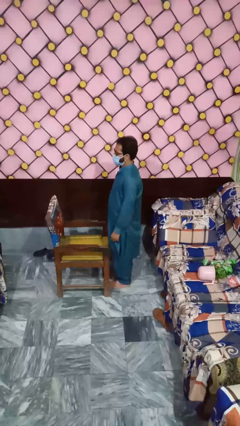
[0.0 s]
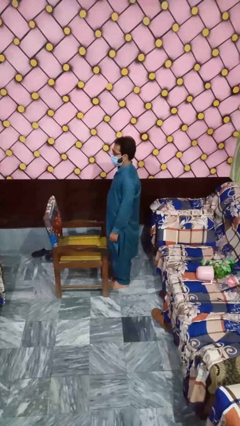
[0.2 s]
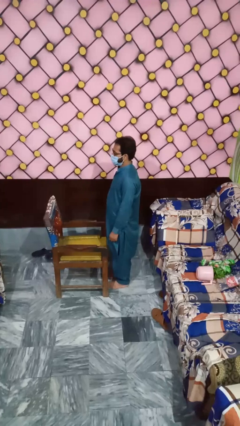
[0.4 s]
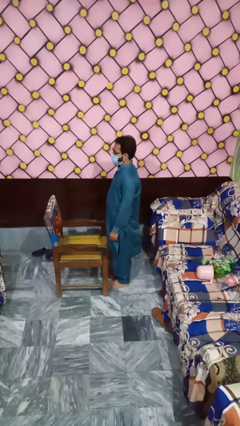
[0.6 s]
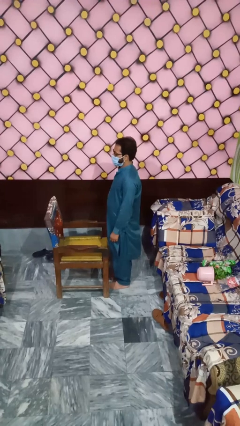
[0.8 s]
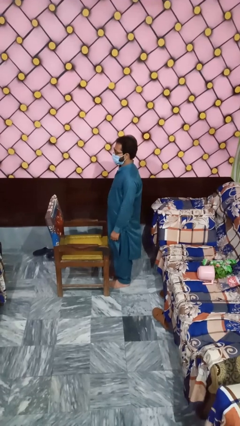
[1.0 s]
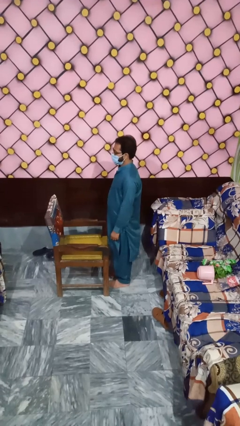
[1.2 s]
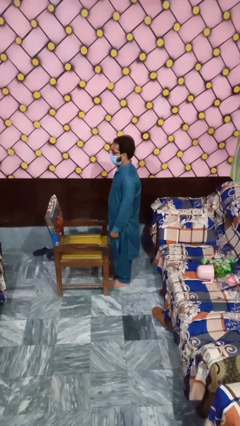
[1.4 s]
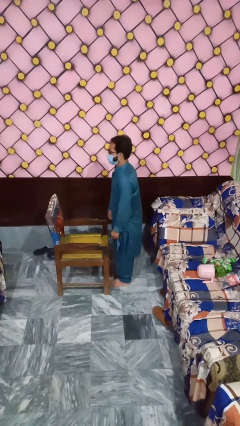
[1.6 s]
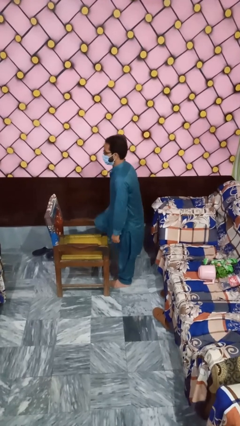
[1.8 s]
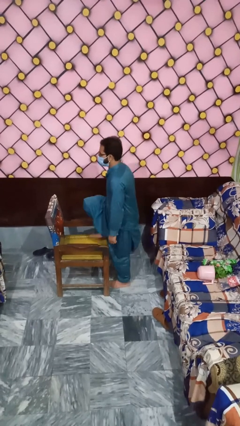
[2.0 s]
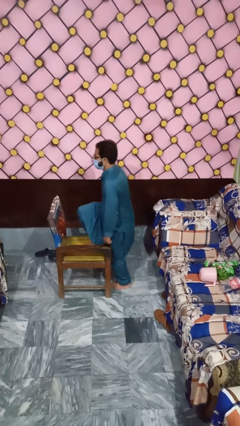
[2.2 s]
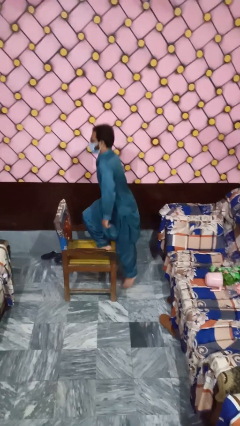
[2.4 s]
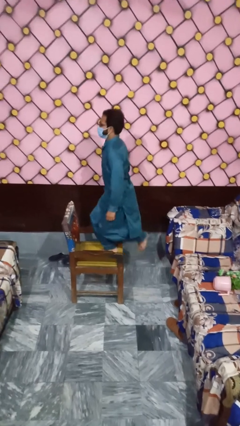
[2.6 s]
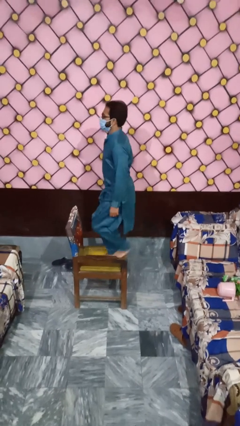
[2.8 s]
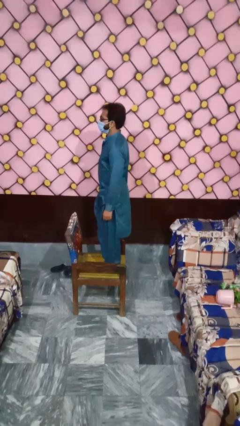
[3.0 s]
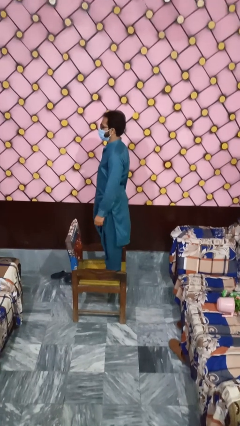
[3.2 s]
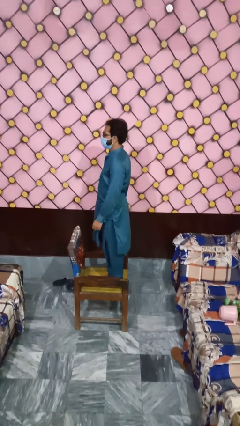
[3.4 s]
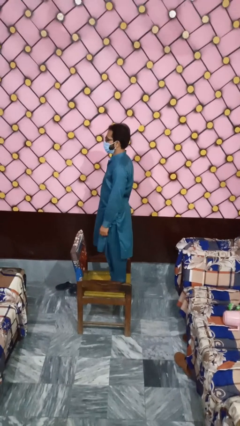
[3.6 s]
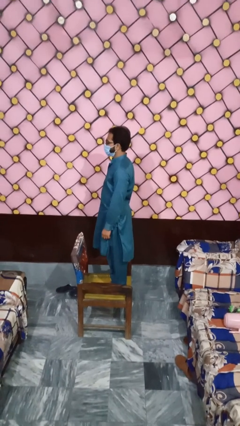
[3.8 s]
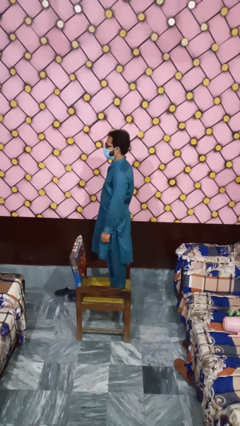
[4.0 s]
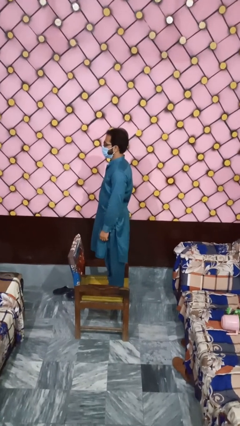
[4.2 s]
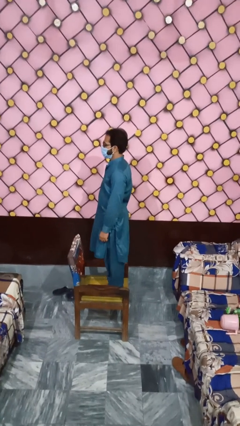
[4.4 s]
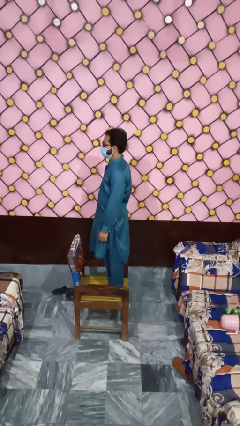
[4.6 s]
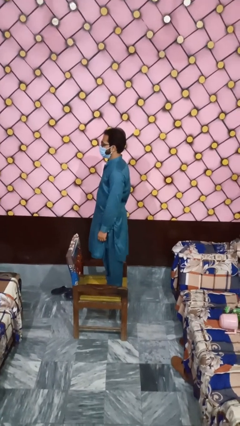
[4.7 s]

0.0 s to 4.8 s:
person climbs on chair

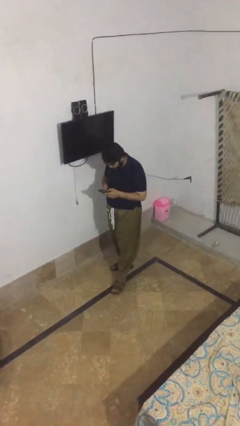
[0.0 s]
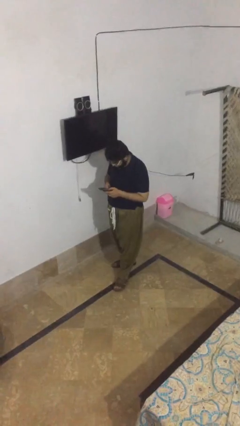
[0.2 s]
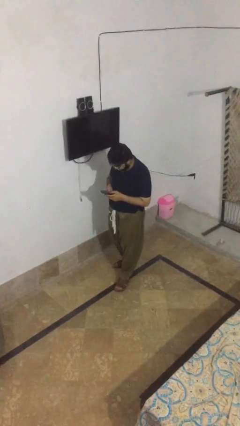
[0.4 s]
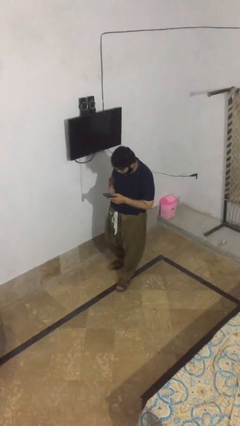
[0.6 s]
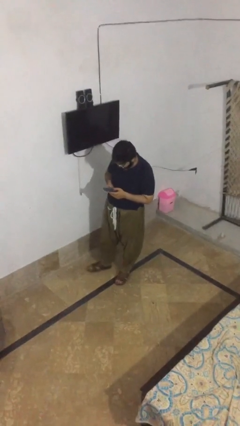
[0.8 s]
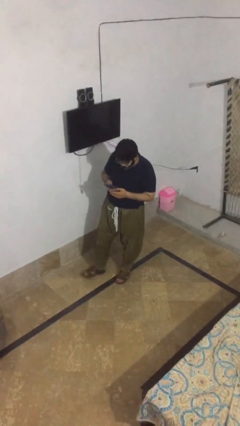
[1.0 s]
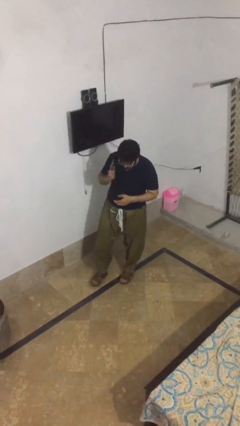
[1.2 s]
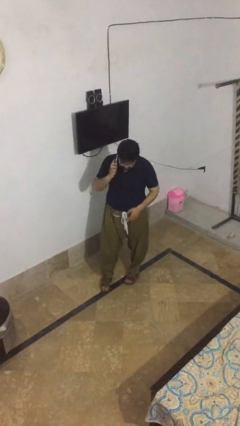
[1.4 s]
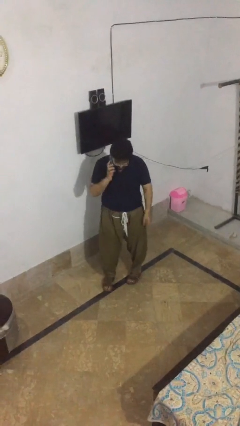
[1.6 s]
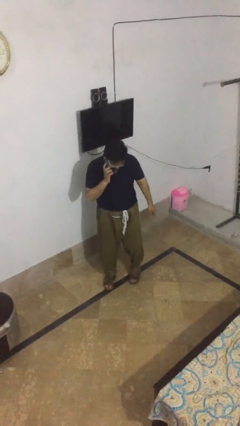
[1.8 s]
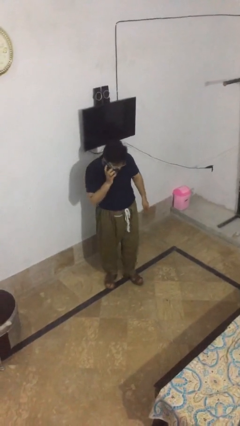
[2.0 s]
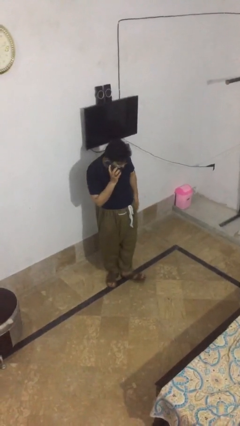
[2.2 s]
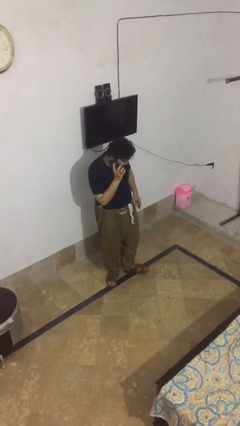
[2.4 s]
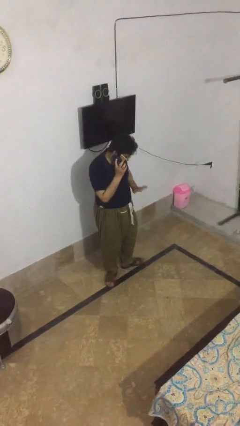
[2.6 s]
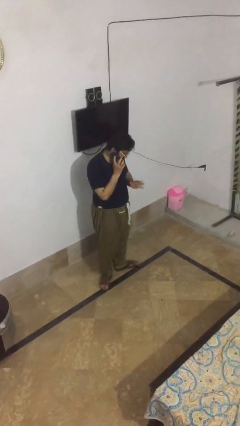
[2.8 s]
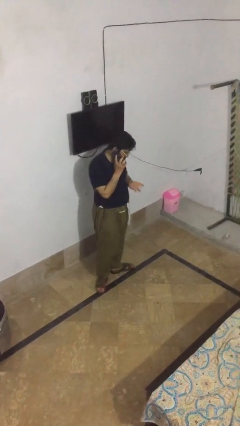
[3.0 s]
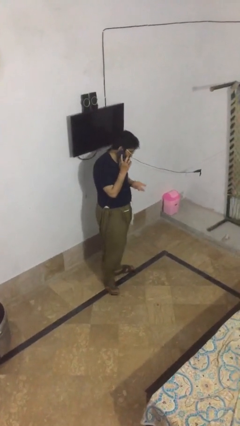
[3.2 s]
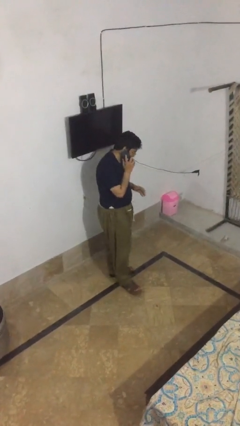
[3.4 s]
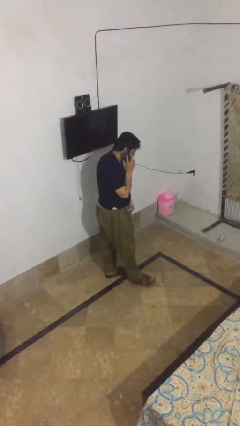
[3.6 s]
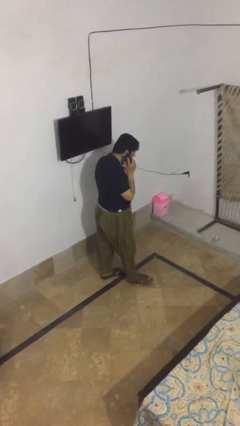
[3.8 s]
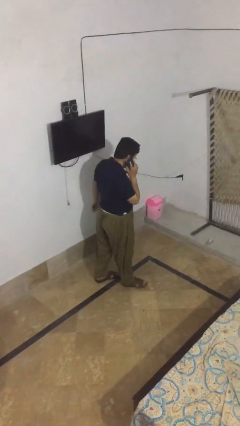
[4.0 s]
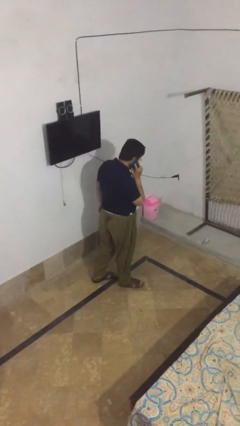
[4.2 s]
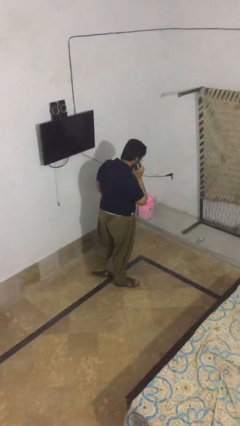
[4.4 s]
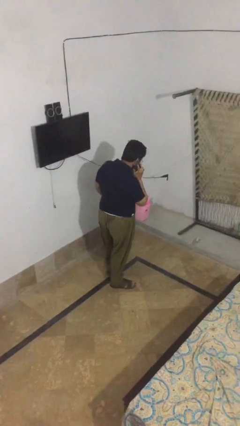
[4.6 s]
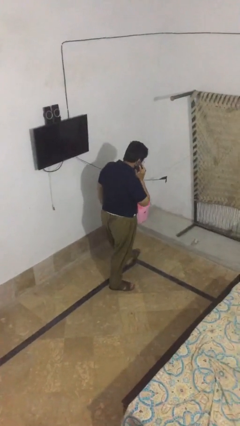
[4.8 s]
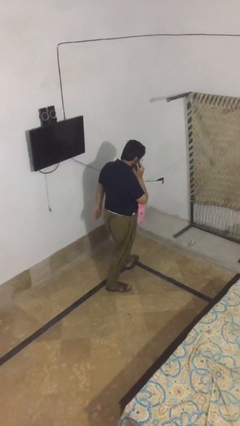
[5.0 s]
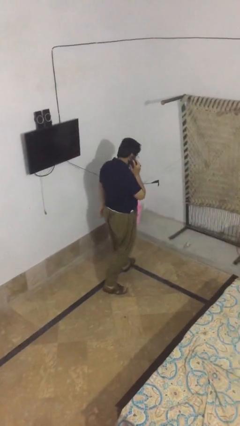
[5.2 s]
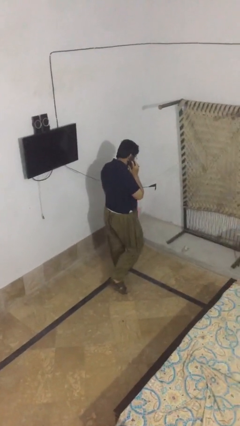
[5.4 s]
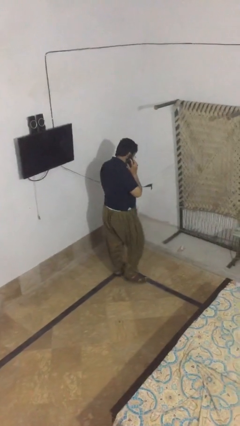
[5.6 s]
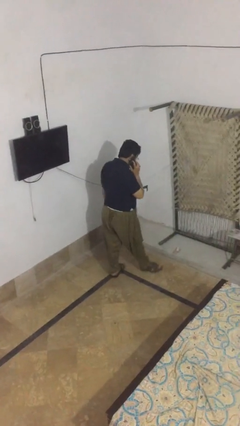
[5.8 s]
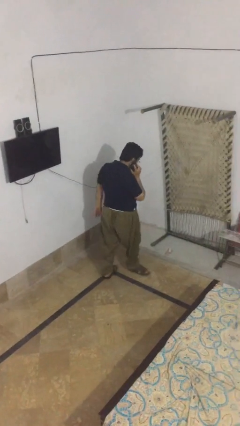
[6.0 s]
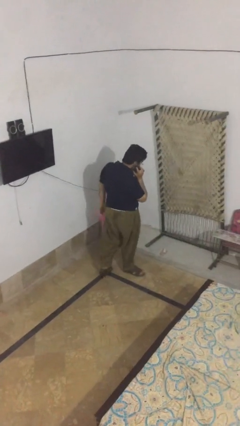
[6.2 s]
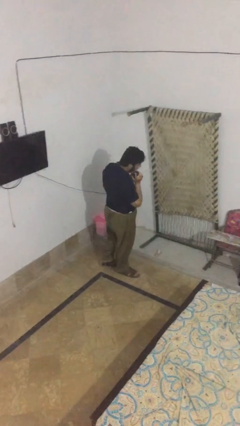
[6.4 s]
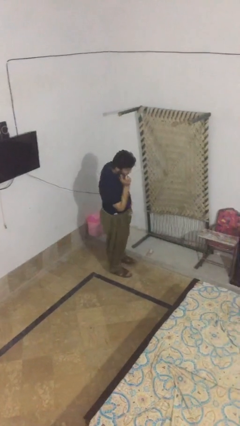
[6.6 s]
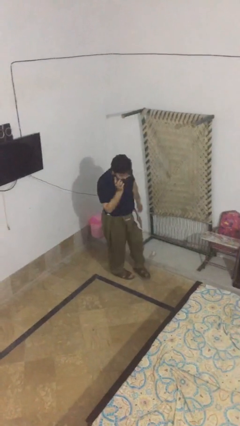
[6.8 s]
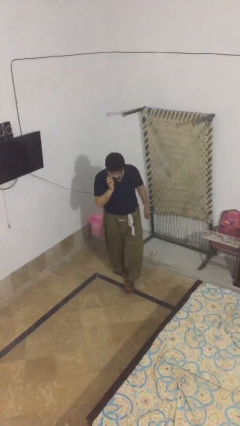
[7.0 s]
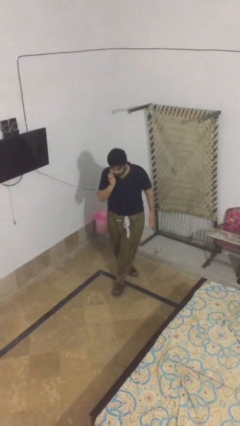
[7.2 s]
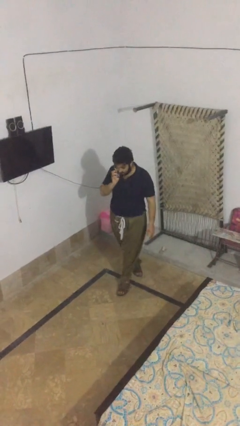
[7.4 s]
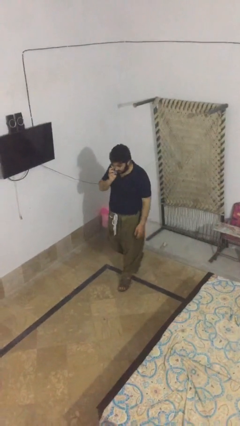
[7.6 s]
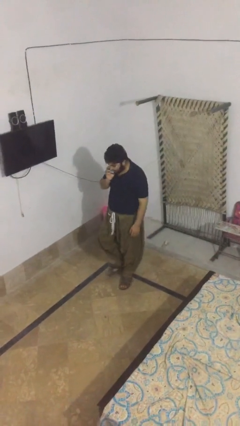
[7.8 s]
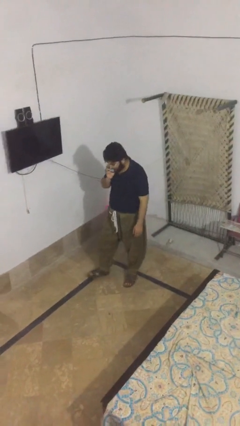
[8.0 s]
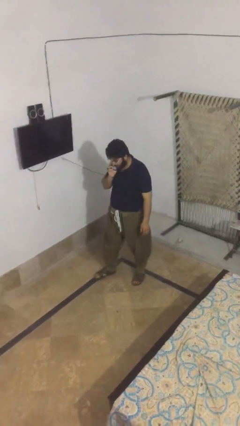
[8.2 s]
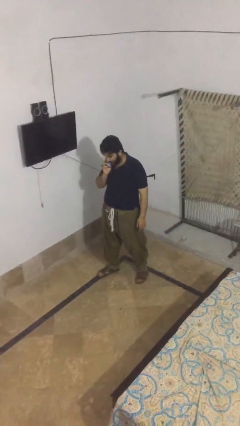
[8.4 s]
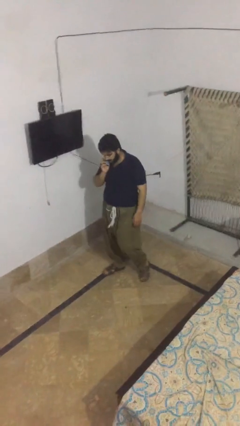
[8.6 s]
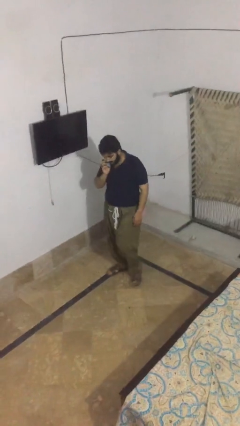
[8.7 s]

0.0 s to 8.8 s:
person talks on phone

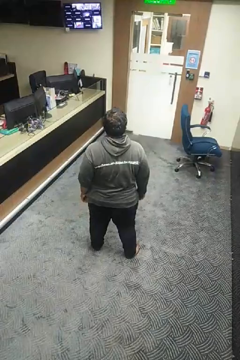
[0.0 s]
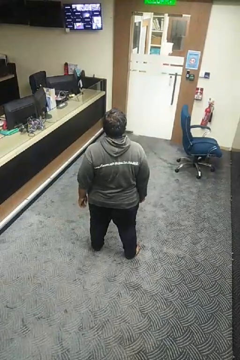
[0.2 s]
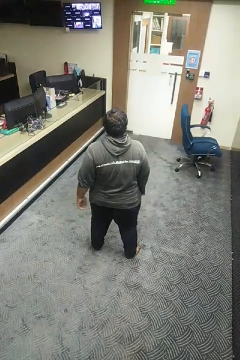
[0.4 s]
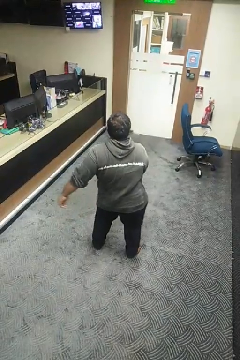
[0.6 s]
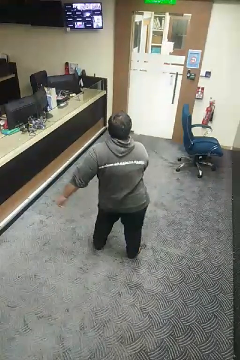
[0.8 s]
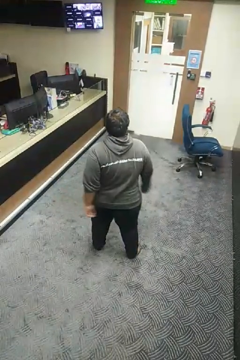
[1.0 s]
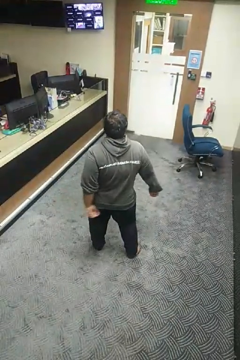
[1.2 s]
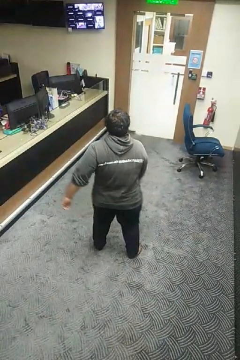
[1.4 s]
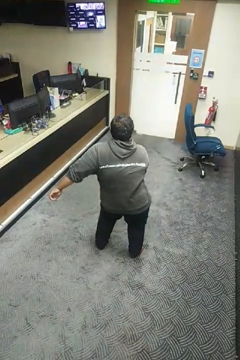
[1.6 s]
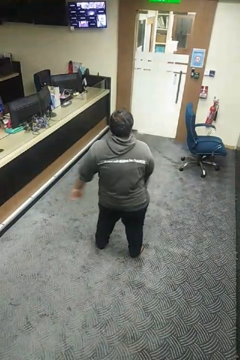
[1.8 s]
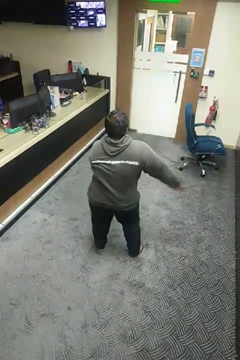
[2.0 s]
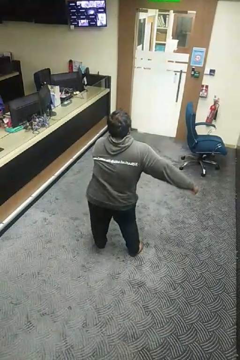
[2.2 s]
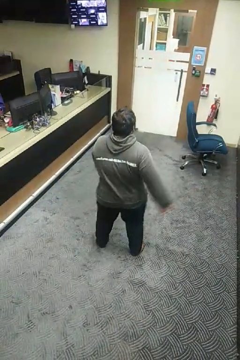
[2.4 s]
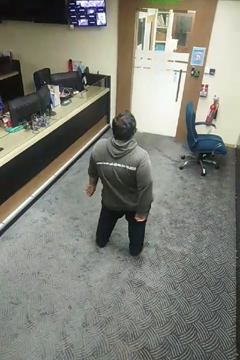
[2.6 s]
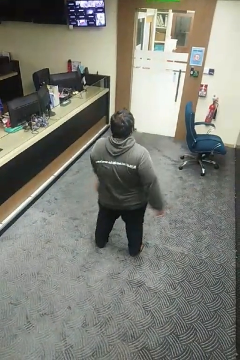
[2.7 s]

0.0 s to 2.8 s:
person dances in place

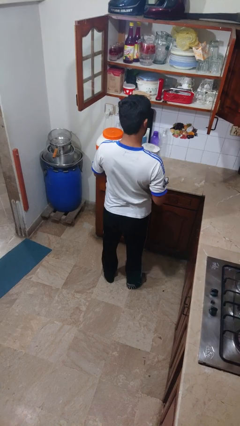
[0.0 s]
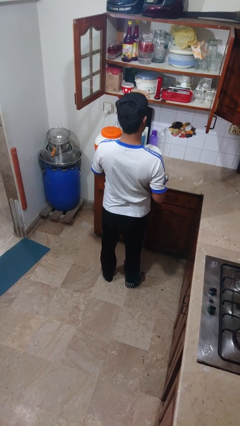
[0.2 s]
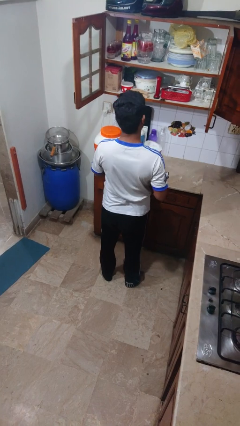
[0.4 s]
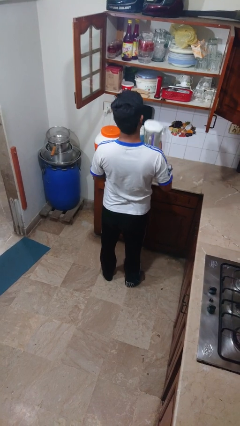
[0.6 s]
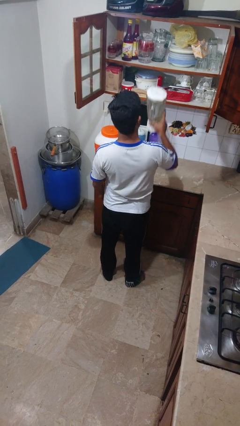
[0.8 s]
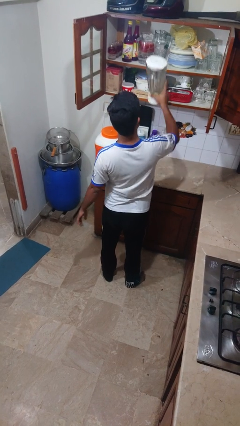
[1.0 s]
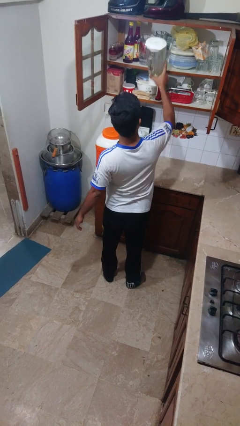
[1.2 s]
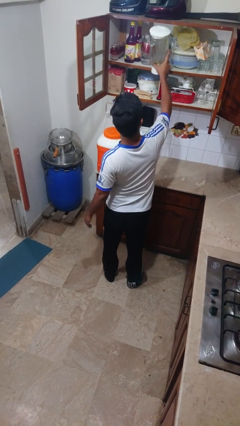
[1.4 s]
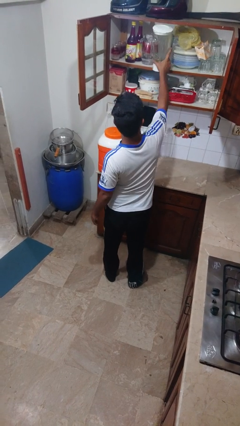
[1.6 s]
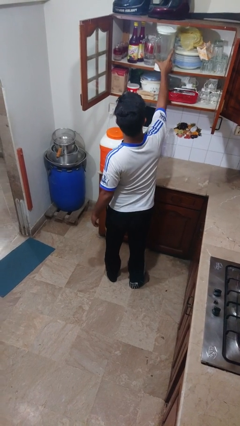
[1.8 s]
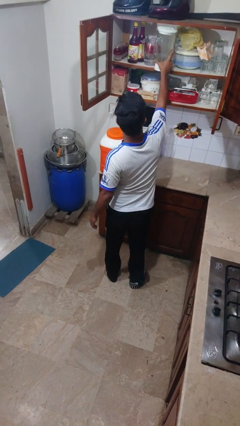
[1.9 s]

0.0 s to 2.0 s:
person puts down object into cabinet
